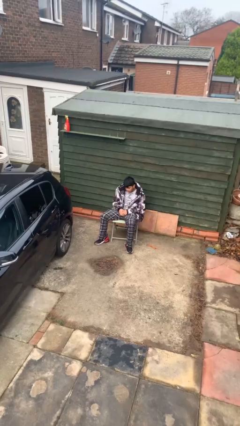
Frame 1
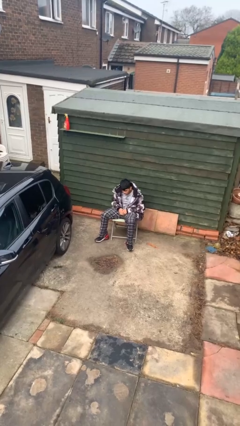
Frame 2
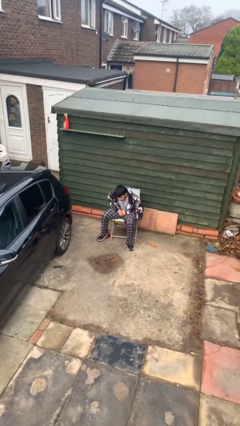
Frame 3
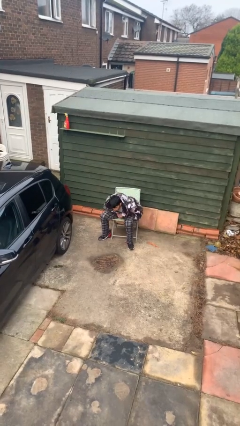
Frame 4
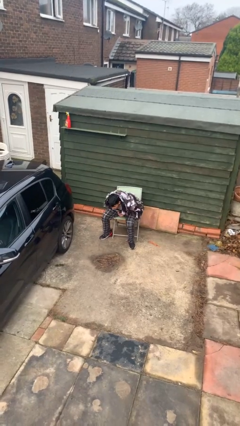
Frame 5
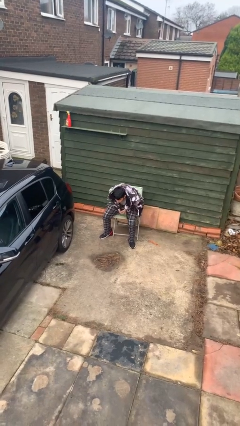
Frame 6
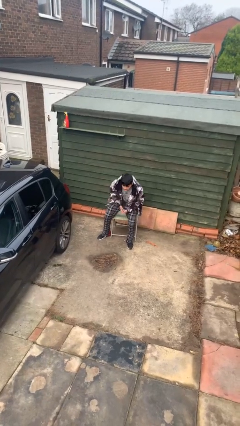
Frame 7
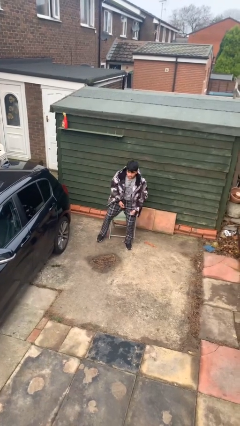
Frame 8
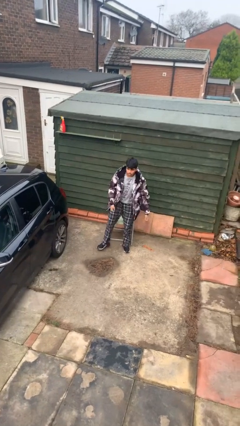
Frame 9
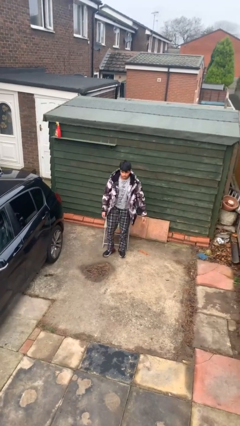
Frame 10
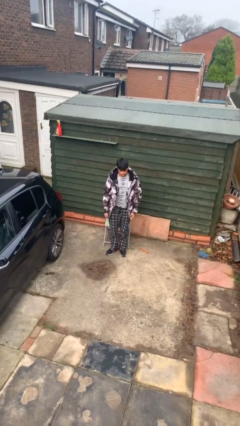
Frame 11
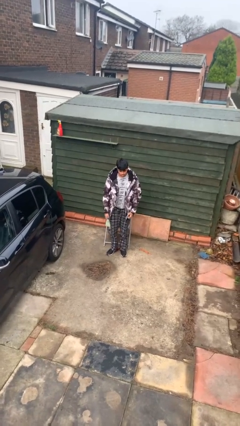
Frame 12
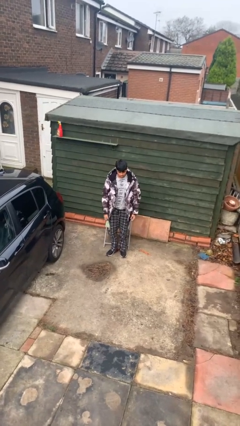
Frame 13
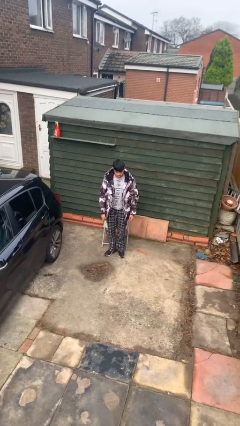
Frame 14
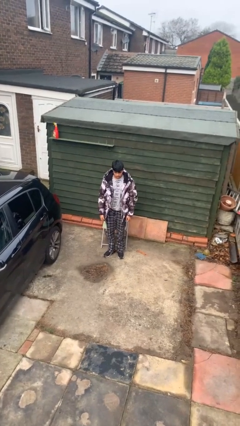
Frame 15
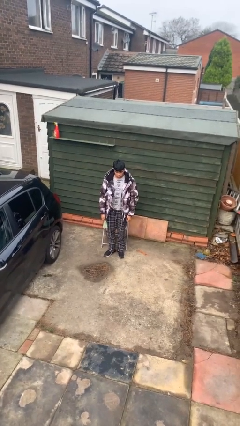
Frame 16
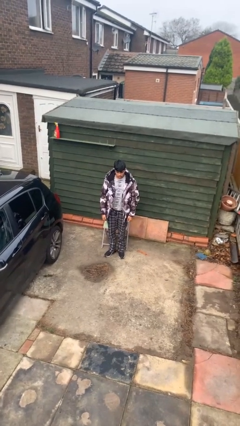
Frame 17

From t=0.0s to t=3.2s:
person stands up

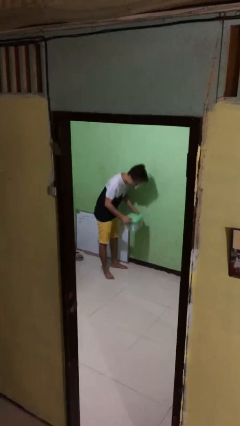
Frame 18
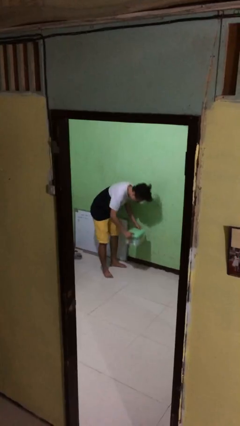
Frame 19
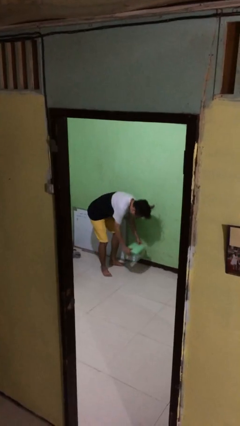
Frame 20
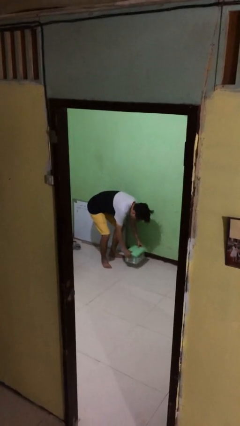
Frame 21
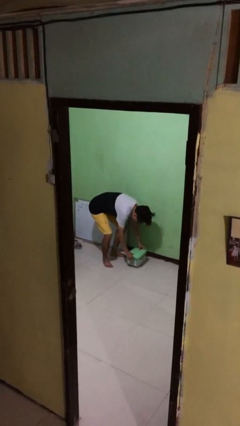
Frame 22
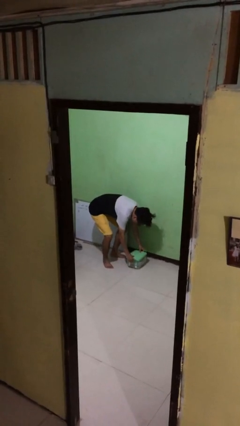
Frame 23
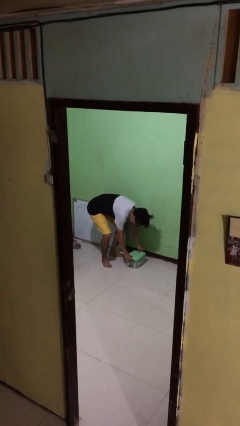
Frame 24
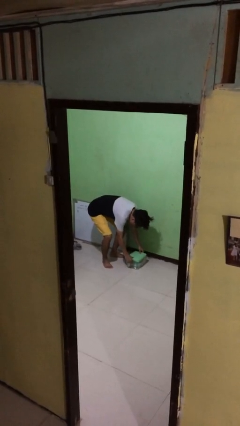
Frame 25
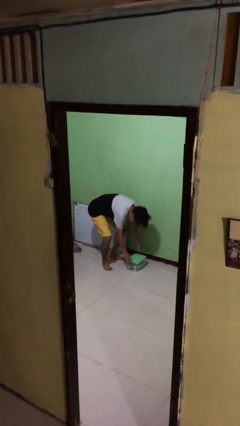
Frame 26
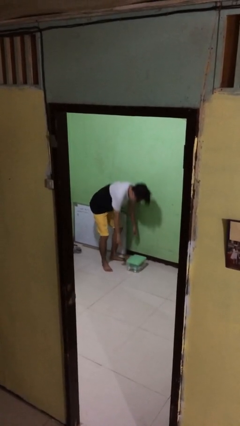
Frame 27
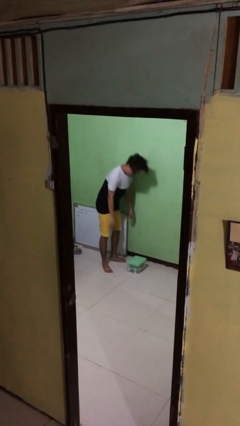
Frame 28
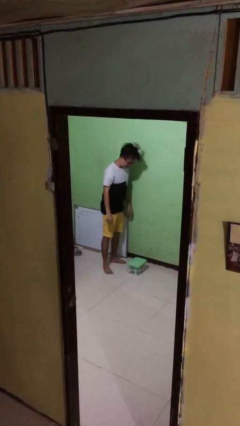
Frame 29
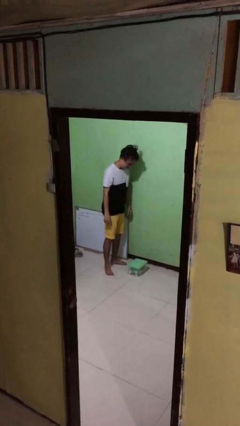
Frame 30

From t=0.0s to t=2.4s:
person puts down object on floor

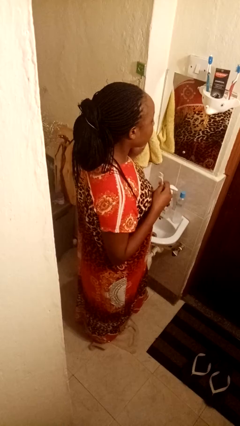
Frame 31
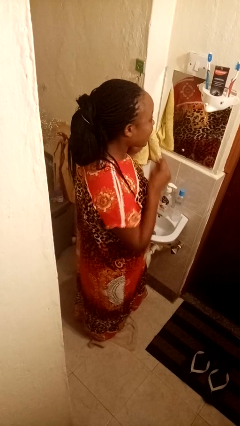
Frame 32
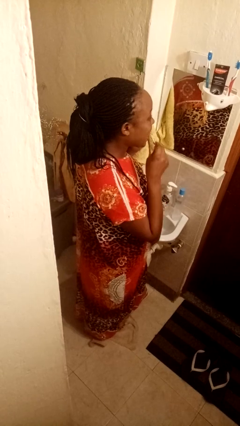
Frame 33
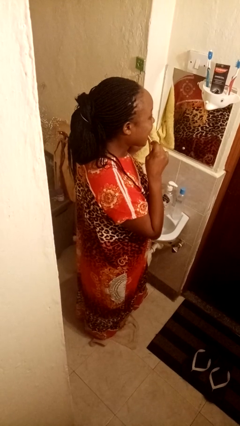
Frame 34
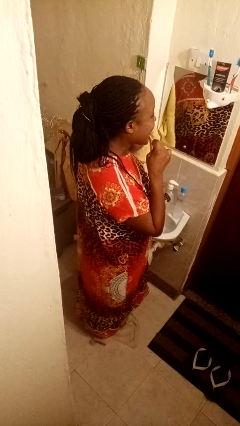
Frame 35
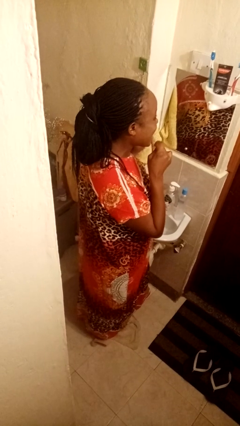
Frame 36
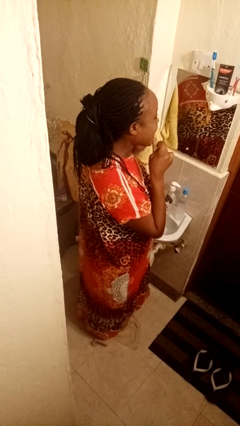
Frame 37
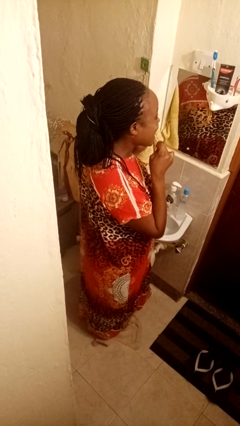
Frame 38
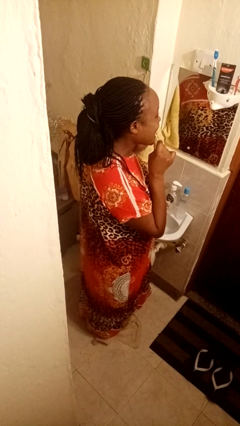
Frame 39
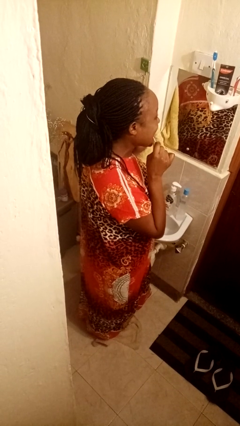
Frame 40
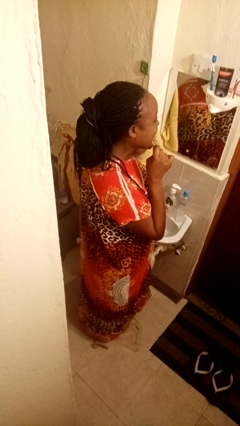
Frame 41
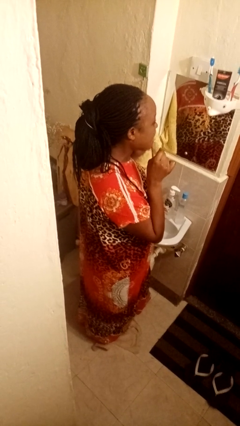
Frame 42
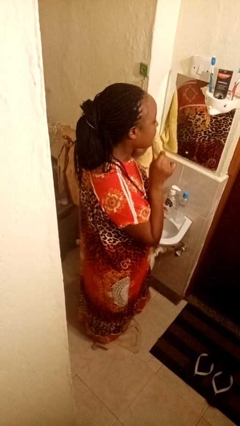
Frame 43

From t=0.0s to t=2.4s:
person flosses

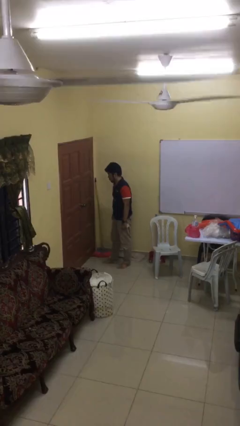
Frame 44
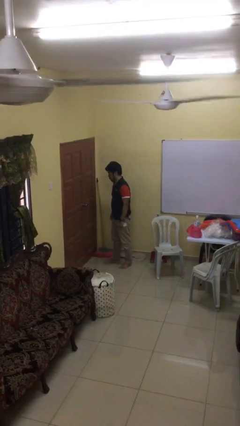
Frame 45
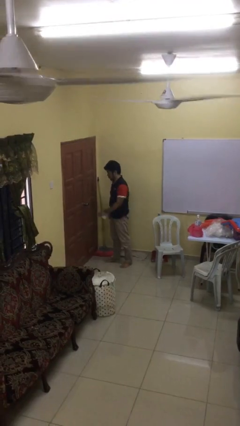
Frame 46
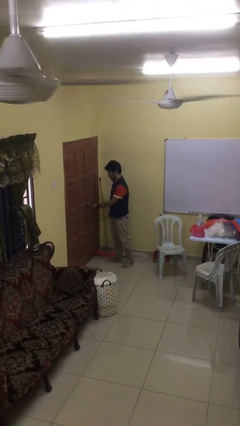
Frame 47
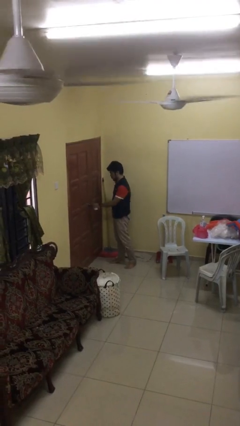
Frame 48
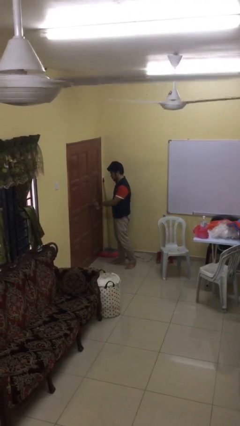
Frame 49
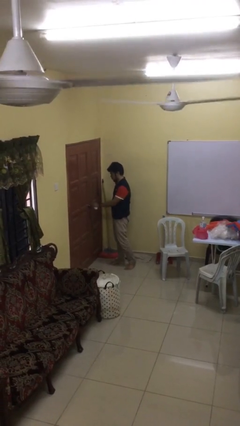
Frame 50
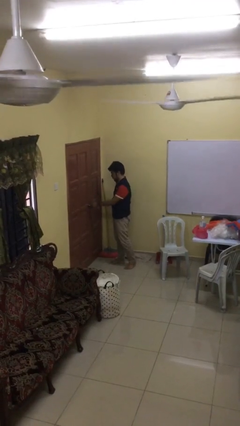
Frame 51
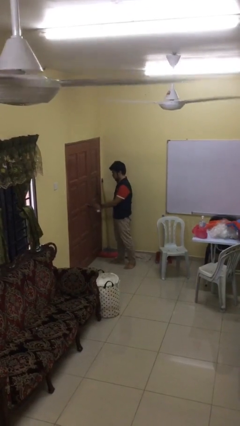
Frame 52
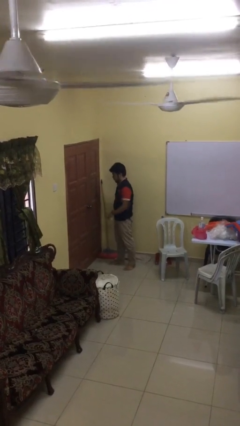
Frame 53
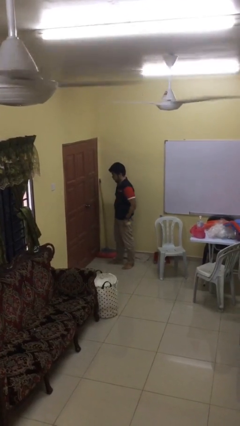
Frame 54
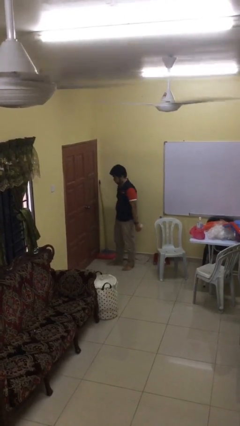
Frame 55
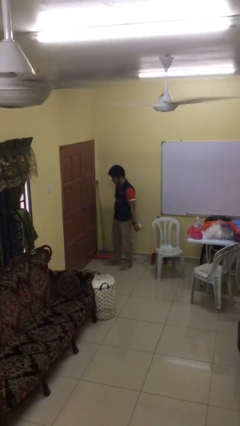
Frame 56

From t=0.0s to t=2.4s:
person unlocks door with keys

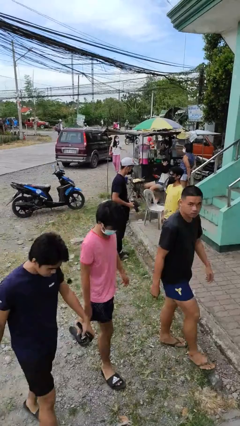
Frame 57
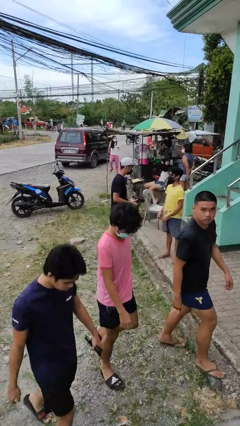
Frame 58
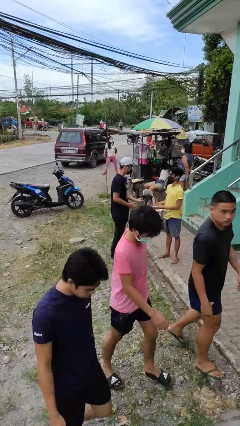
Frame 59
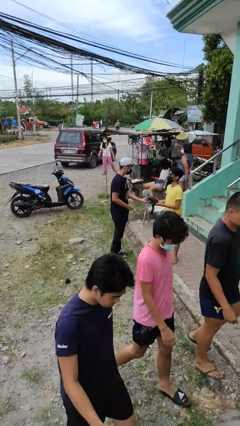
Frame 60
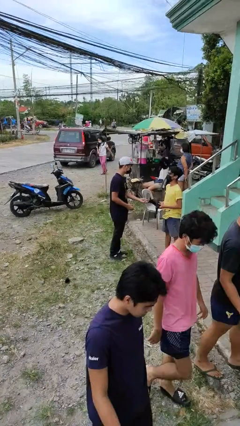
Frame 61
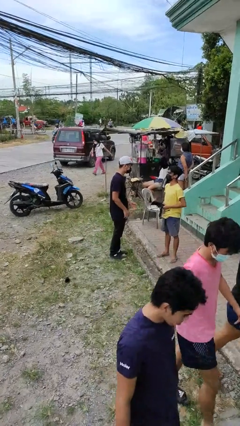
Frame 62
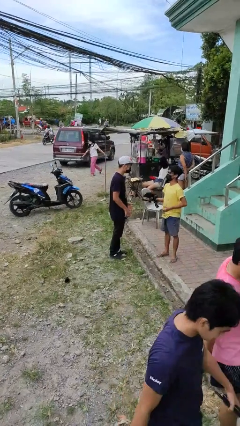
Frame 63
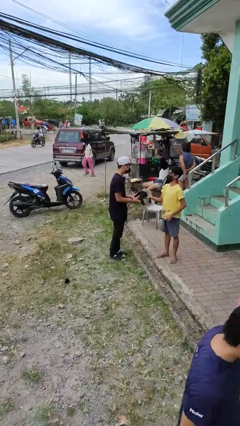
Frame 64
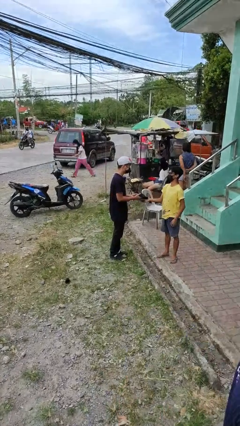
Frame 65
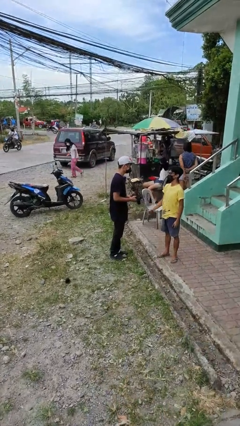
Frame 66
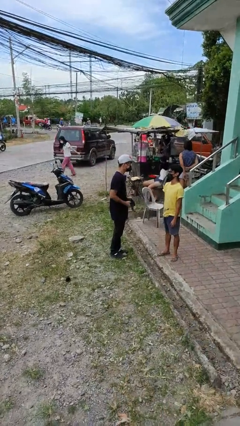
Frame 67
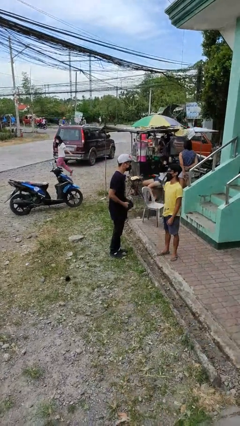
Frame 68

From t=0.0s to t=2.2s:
person transfers object to person

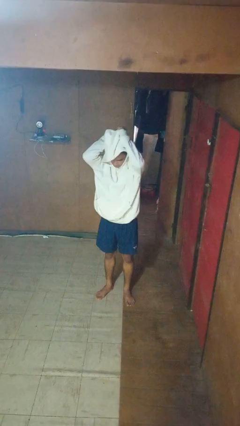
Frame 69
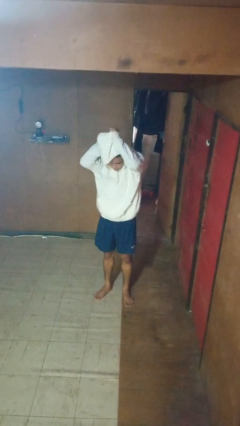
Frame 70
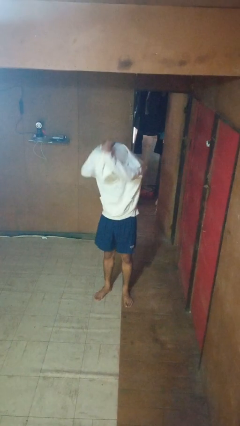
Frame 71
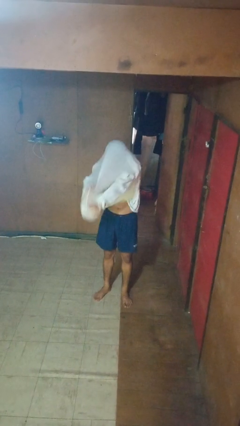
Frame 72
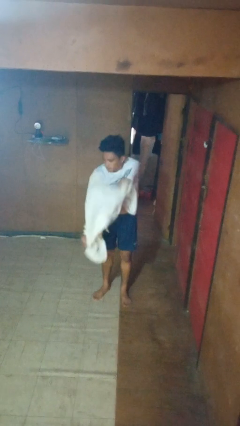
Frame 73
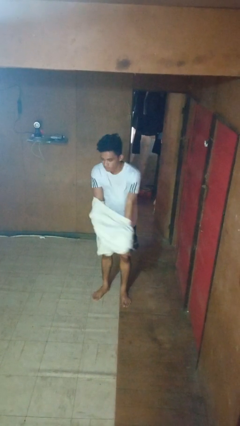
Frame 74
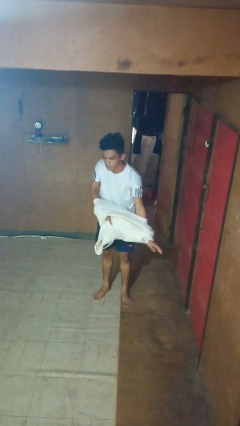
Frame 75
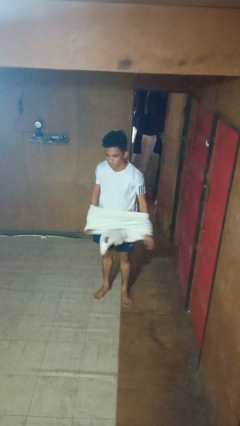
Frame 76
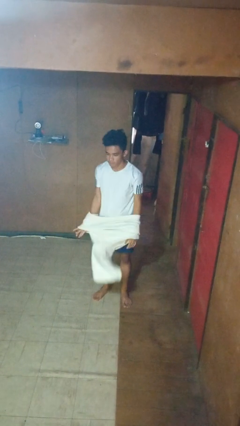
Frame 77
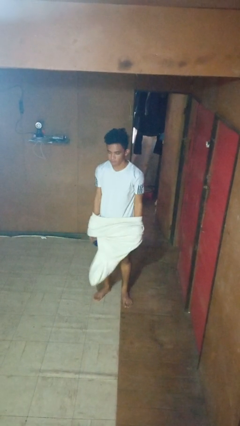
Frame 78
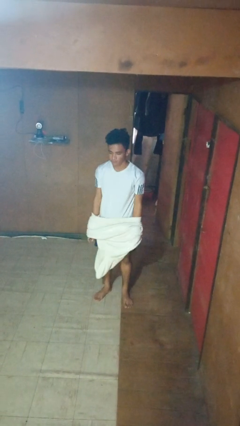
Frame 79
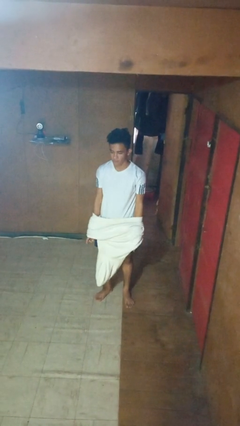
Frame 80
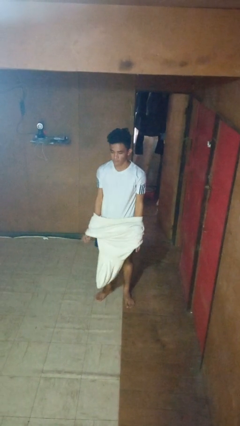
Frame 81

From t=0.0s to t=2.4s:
person takes off hoodie

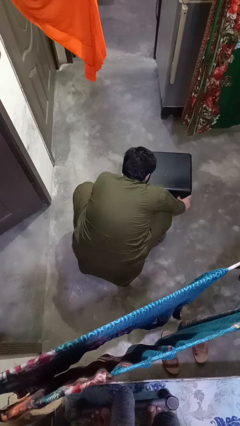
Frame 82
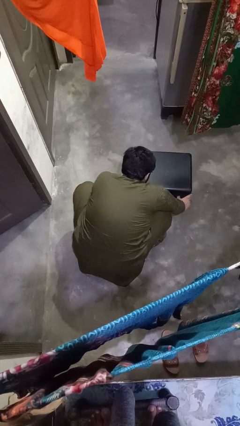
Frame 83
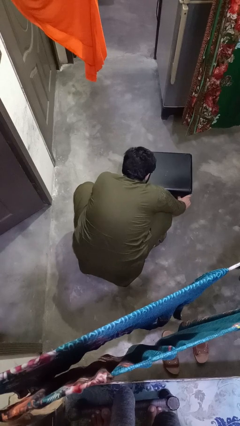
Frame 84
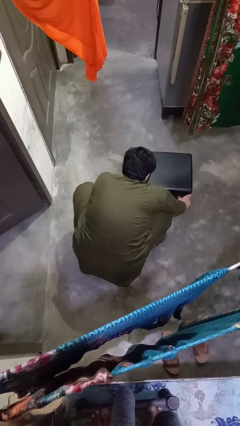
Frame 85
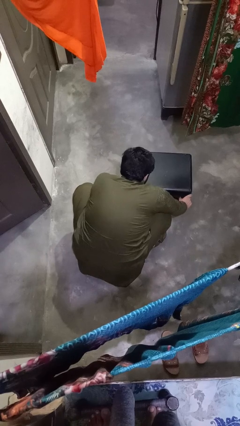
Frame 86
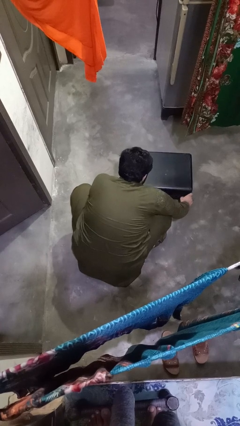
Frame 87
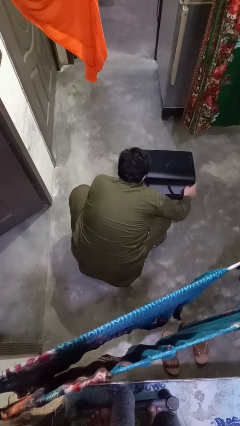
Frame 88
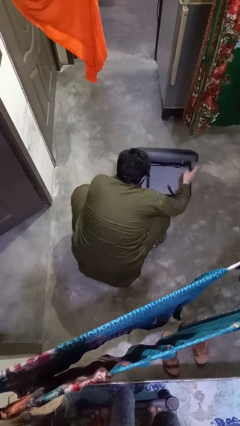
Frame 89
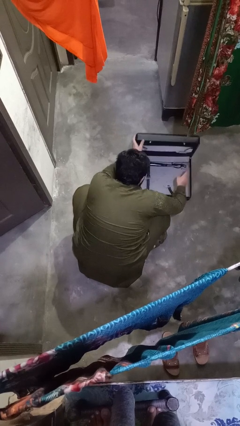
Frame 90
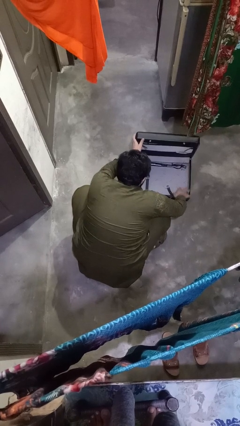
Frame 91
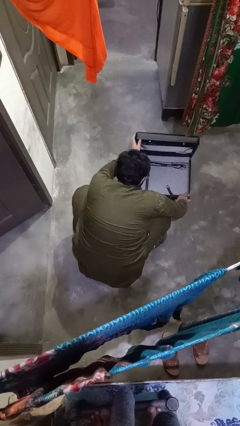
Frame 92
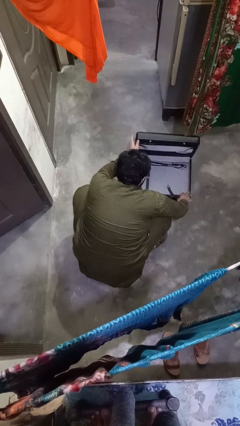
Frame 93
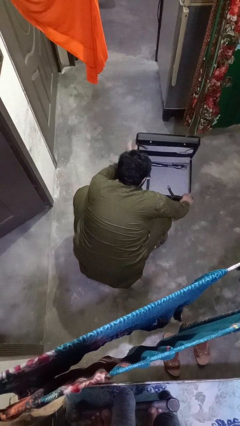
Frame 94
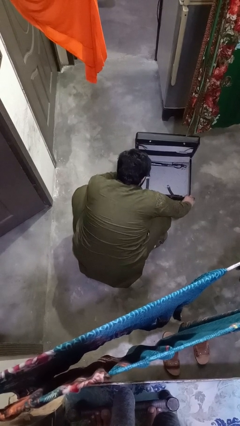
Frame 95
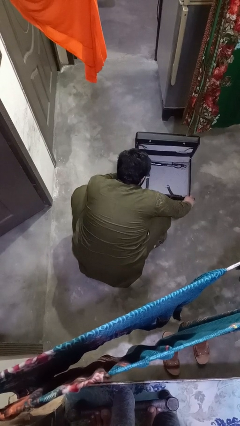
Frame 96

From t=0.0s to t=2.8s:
person opens suitcase
